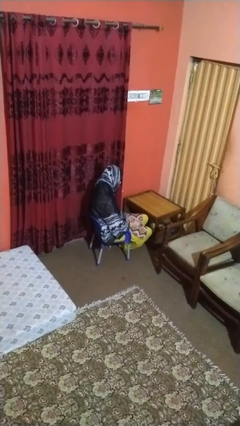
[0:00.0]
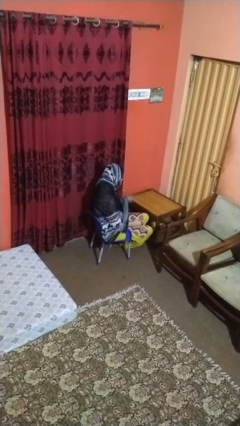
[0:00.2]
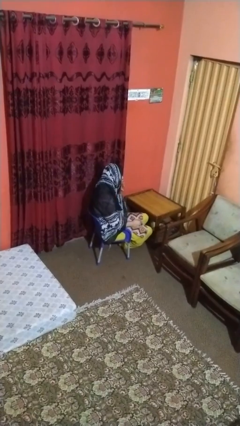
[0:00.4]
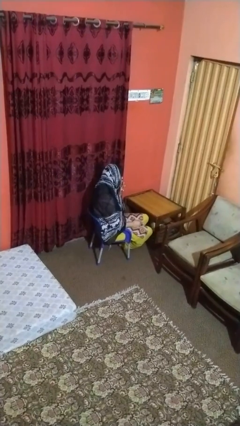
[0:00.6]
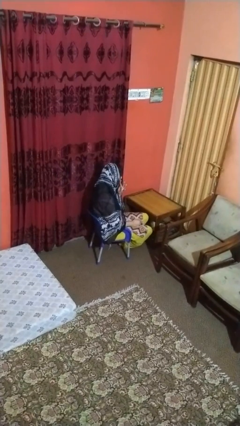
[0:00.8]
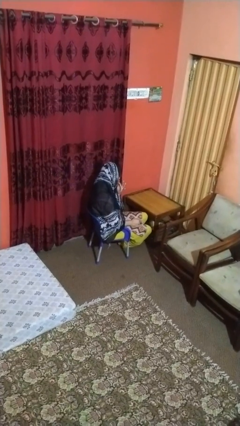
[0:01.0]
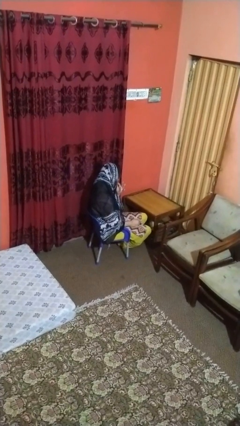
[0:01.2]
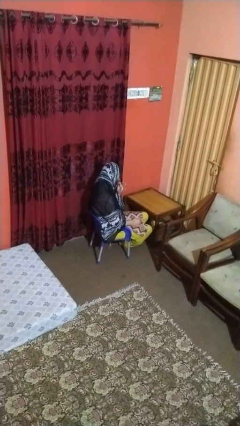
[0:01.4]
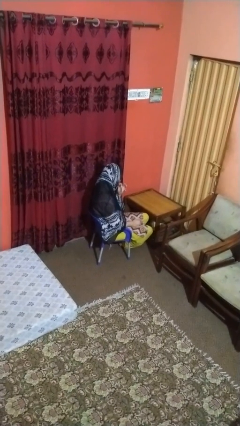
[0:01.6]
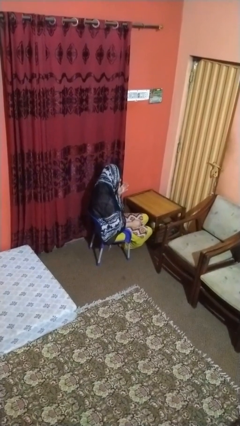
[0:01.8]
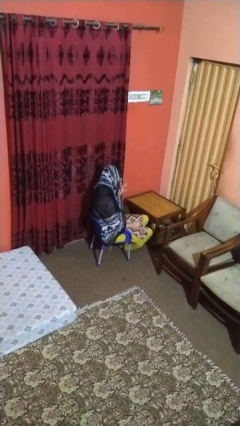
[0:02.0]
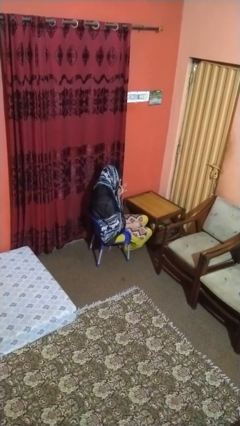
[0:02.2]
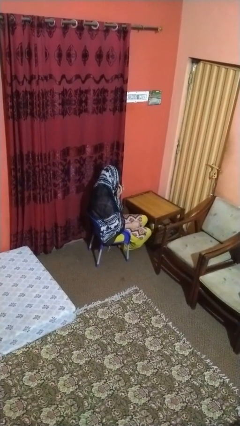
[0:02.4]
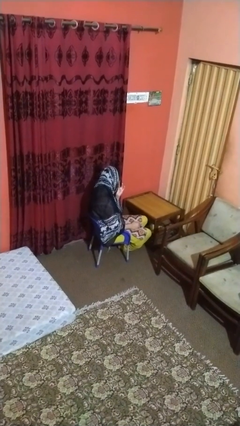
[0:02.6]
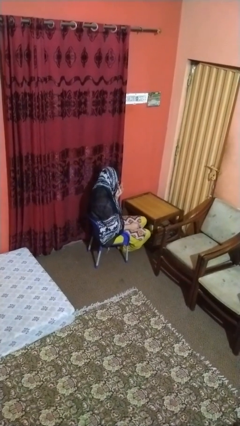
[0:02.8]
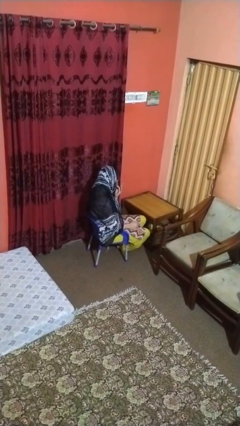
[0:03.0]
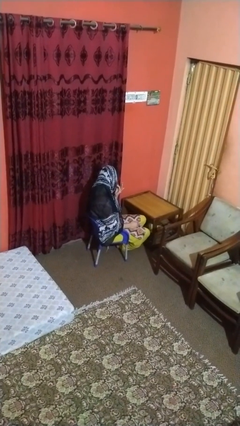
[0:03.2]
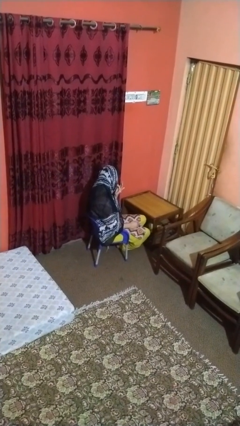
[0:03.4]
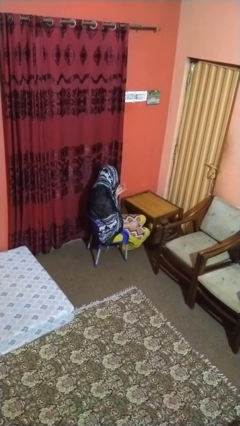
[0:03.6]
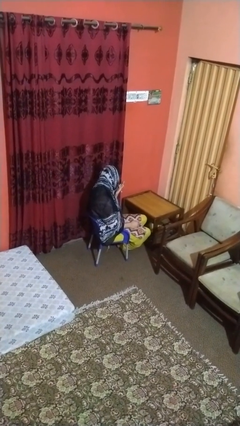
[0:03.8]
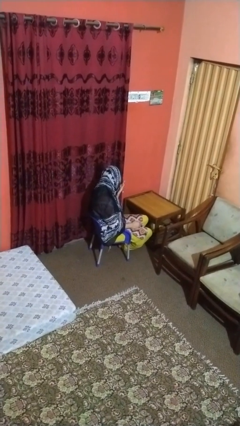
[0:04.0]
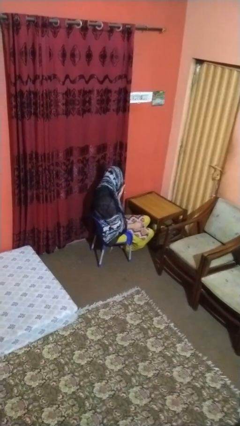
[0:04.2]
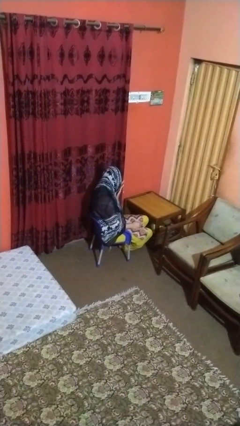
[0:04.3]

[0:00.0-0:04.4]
person licks fingers

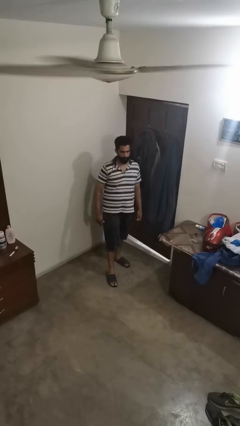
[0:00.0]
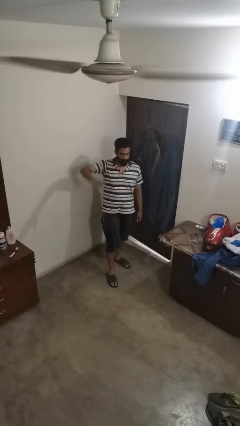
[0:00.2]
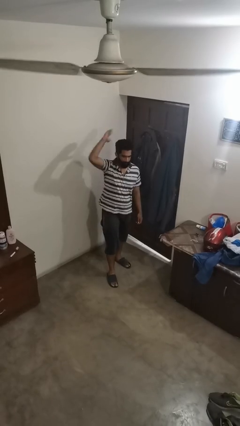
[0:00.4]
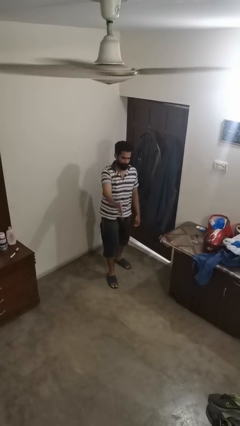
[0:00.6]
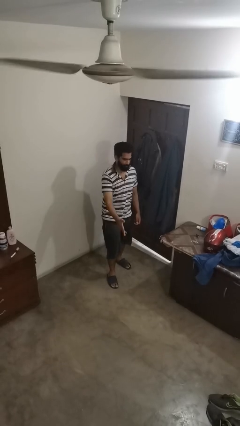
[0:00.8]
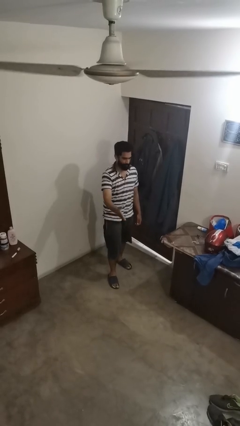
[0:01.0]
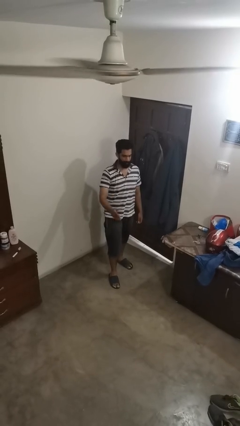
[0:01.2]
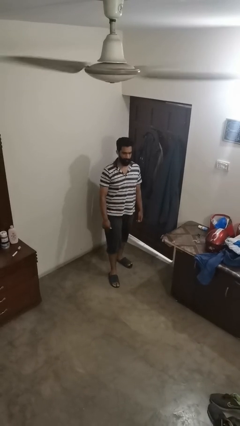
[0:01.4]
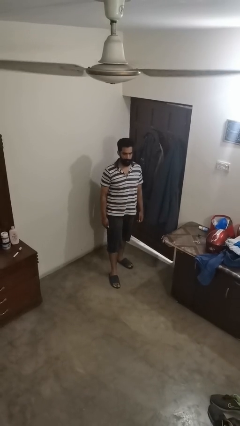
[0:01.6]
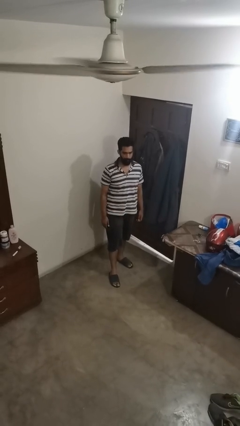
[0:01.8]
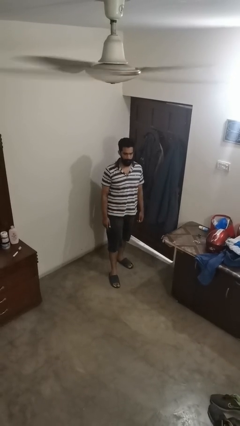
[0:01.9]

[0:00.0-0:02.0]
person karate chop

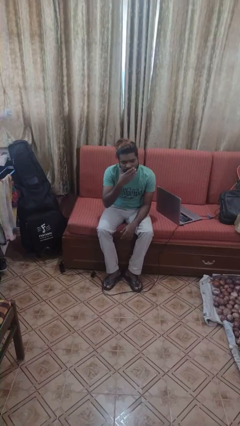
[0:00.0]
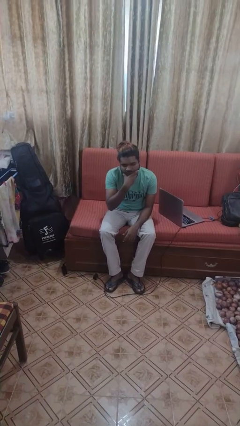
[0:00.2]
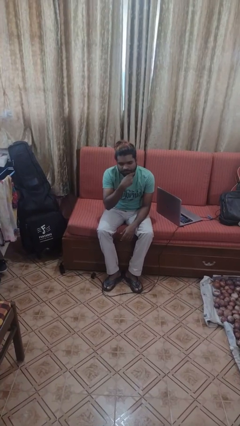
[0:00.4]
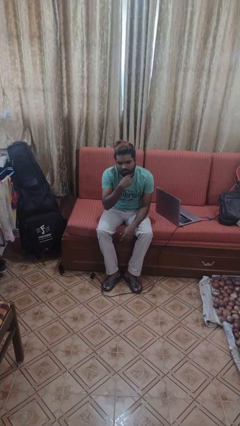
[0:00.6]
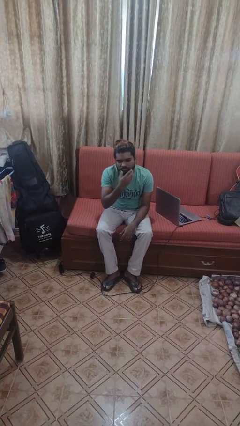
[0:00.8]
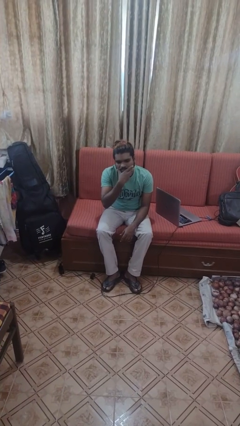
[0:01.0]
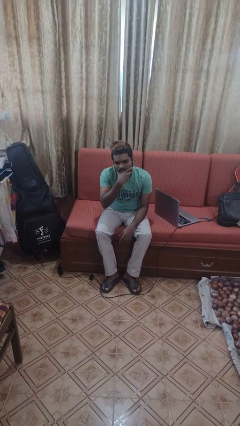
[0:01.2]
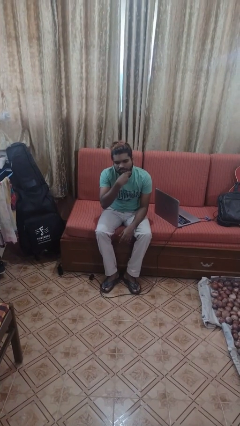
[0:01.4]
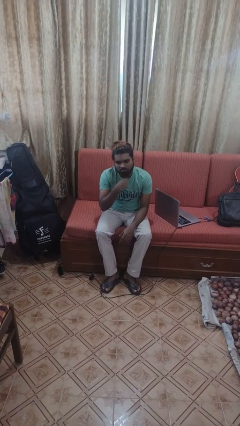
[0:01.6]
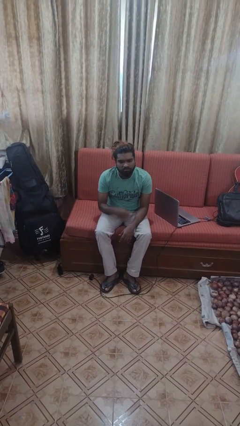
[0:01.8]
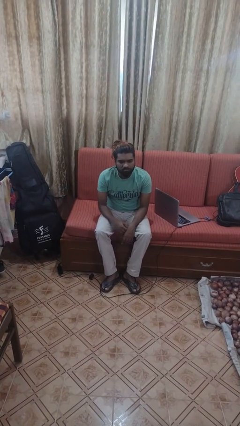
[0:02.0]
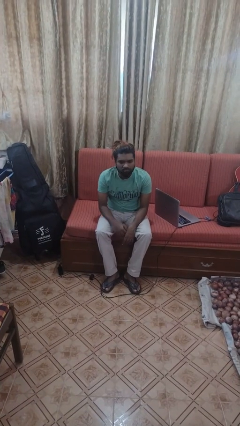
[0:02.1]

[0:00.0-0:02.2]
person strokes chin

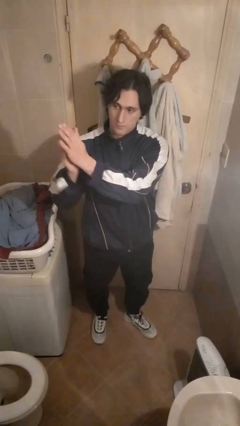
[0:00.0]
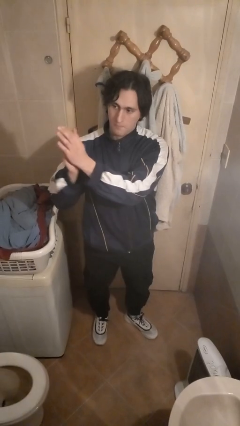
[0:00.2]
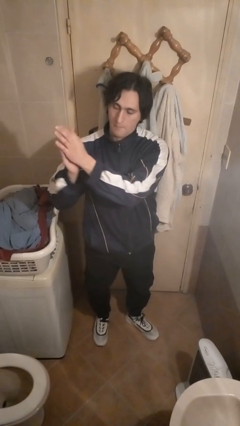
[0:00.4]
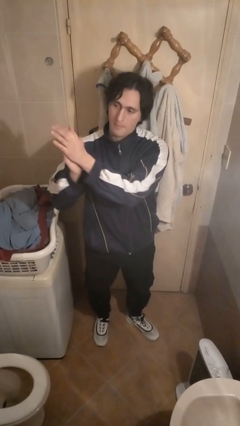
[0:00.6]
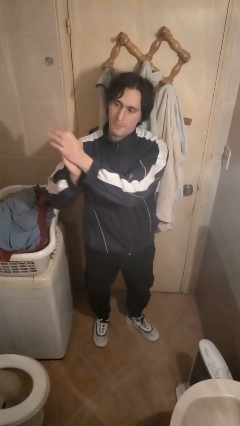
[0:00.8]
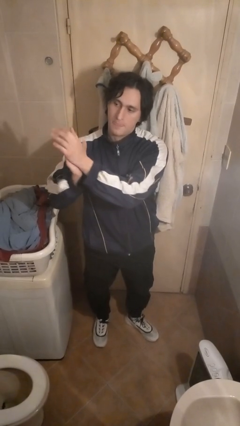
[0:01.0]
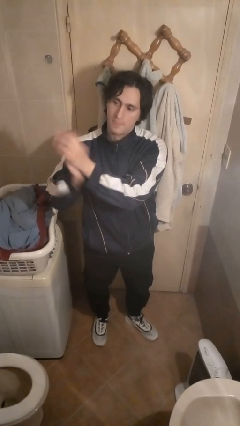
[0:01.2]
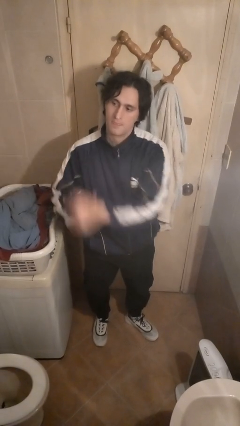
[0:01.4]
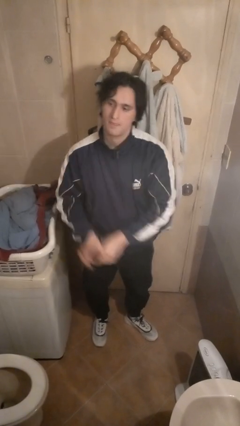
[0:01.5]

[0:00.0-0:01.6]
person claps hands

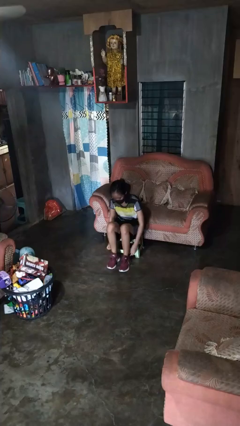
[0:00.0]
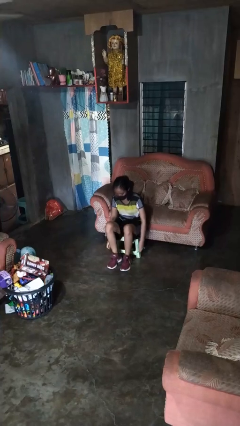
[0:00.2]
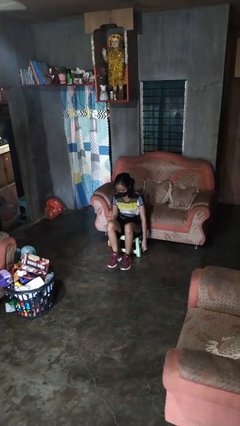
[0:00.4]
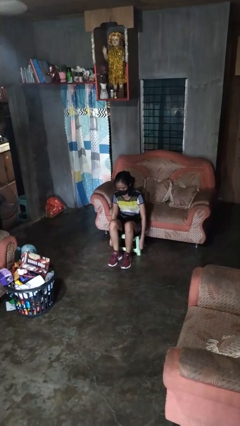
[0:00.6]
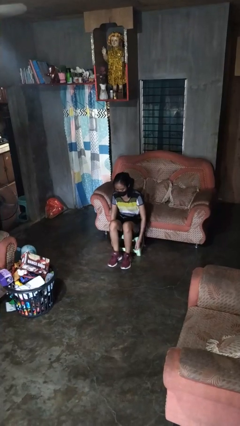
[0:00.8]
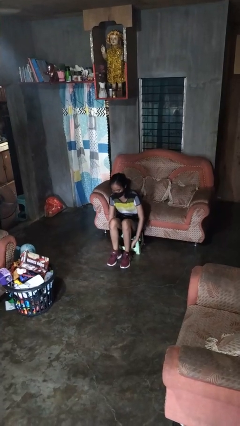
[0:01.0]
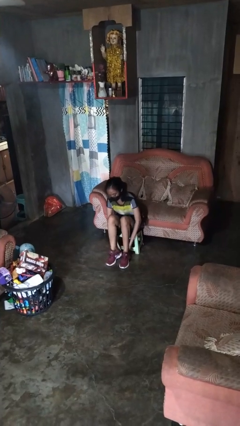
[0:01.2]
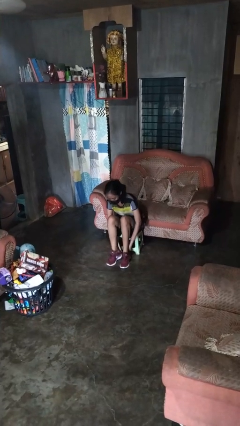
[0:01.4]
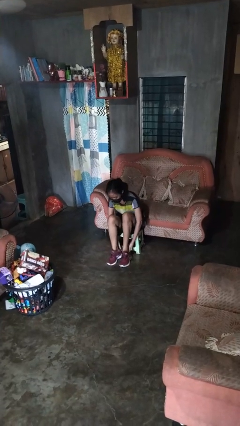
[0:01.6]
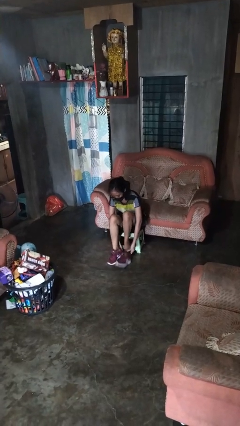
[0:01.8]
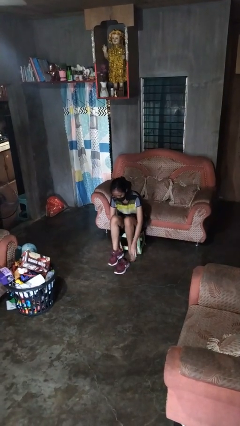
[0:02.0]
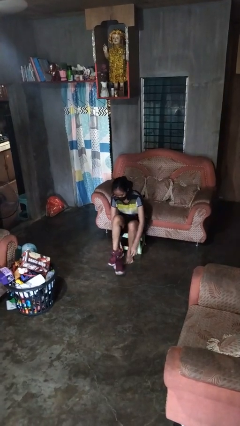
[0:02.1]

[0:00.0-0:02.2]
person takes off shoes

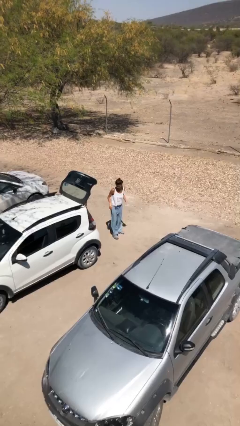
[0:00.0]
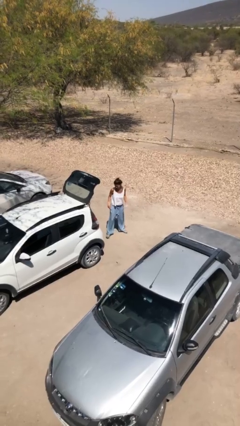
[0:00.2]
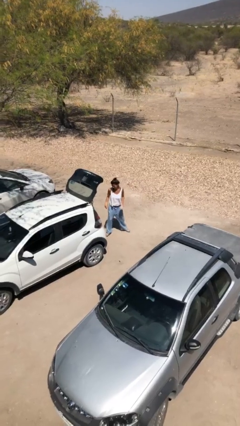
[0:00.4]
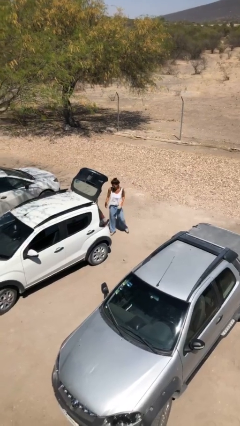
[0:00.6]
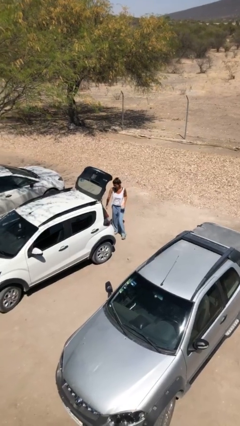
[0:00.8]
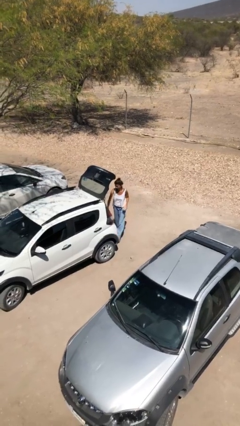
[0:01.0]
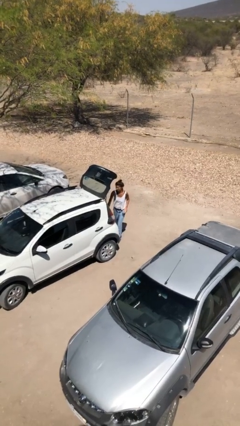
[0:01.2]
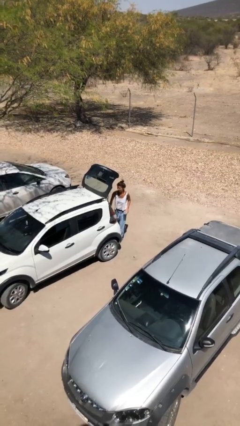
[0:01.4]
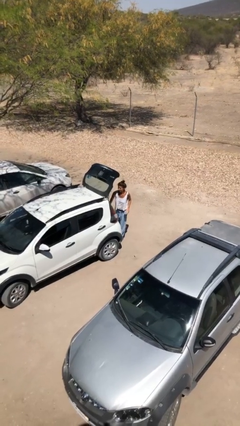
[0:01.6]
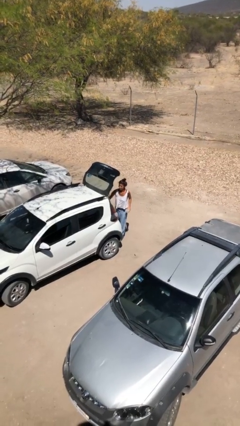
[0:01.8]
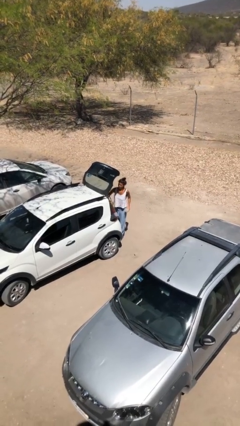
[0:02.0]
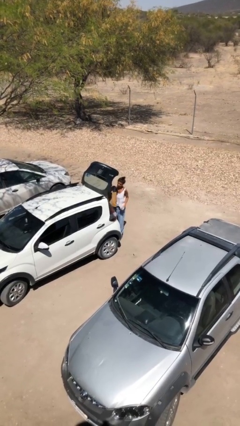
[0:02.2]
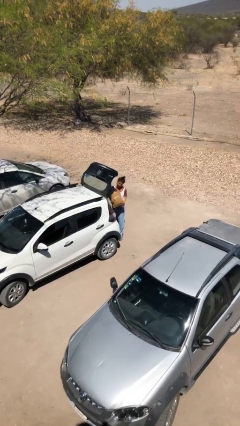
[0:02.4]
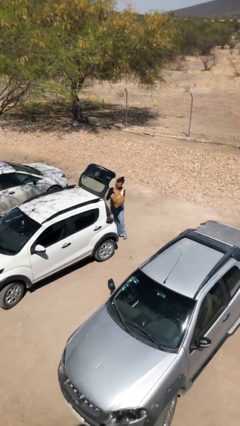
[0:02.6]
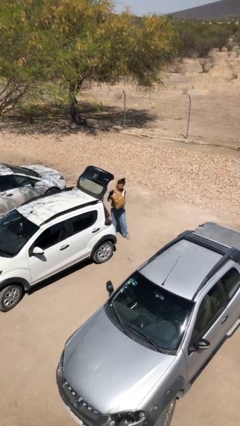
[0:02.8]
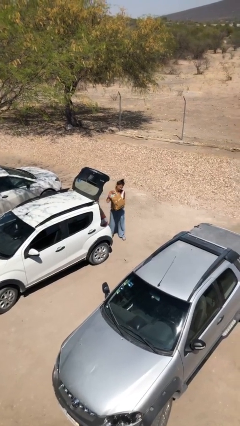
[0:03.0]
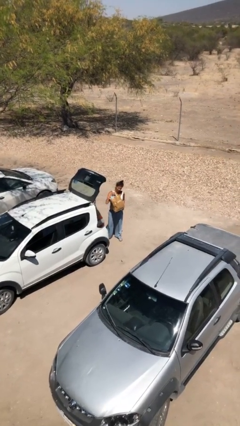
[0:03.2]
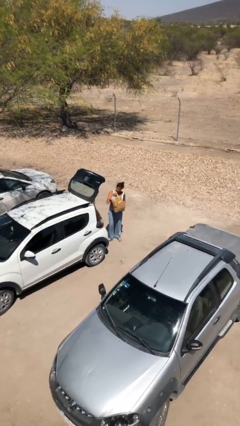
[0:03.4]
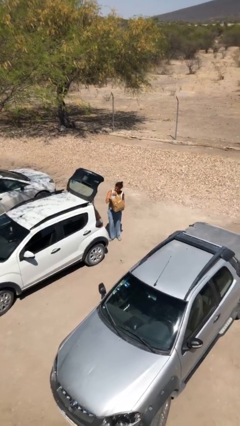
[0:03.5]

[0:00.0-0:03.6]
person unloads car

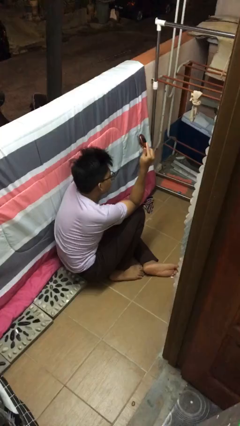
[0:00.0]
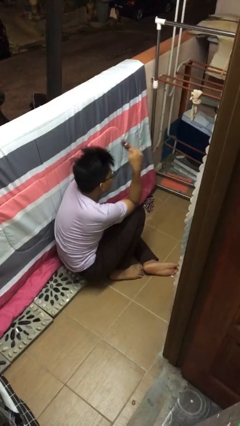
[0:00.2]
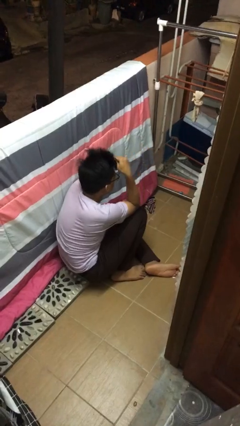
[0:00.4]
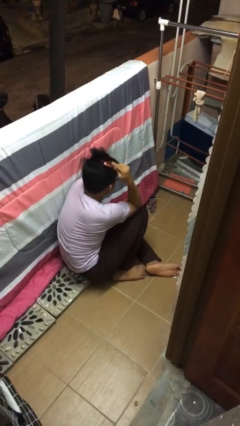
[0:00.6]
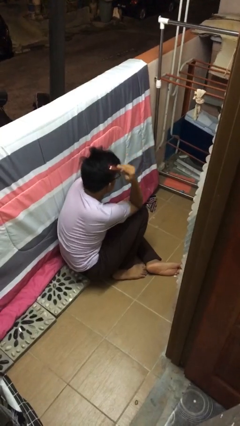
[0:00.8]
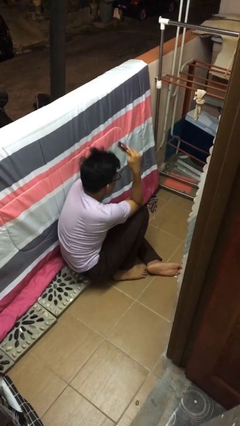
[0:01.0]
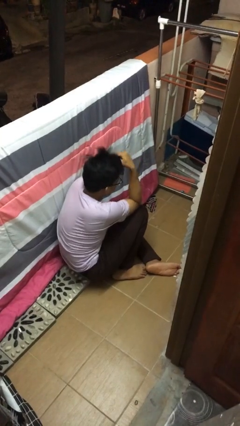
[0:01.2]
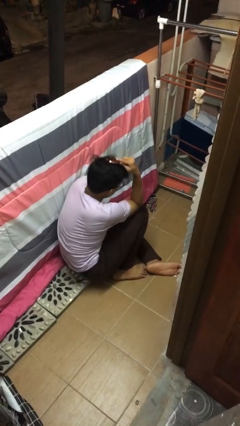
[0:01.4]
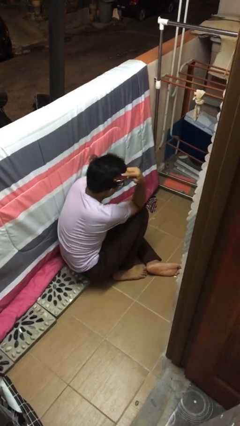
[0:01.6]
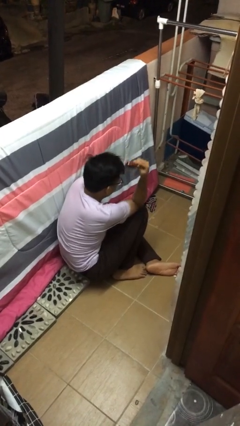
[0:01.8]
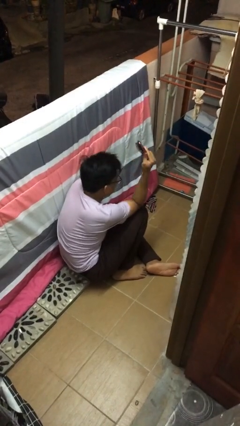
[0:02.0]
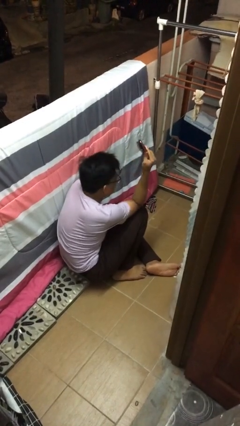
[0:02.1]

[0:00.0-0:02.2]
person brushes hair
